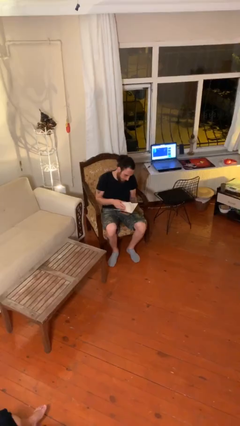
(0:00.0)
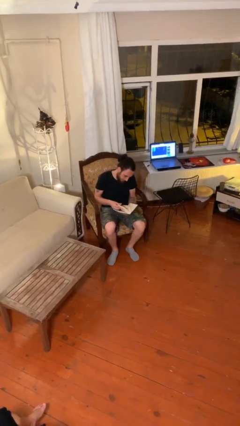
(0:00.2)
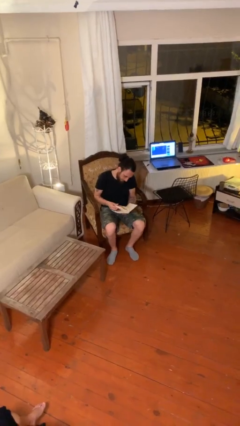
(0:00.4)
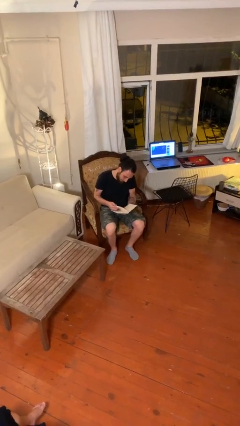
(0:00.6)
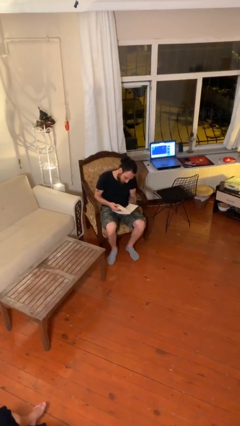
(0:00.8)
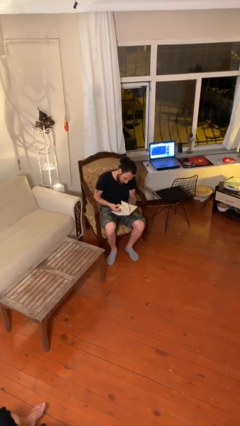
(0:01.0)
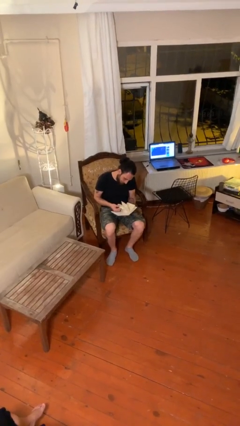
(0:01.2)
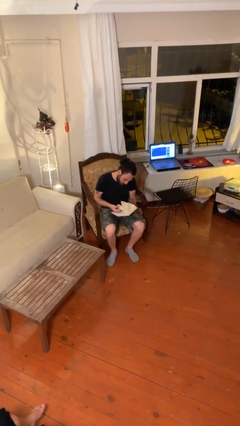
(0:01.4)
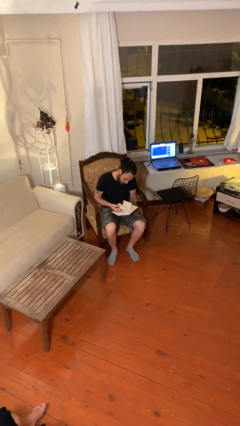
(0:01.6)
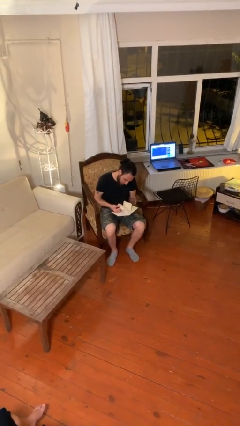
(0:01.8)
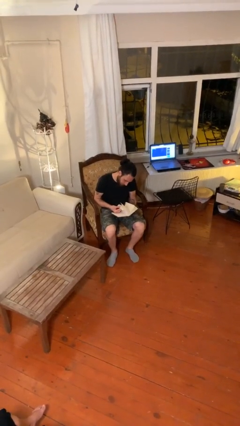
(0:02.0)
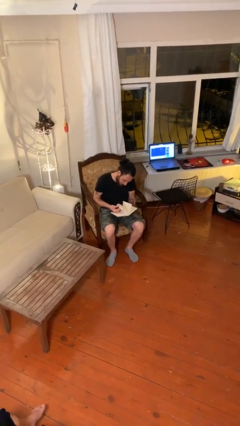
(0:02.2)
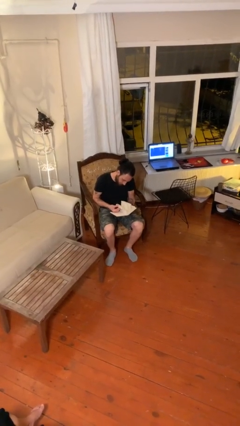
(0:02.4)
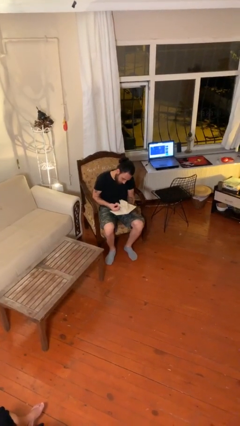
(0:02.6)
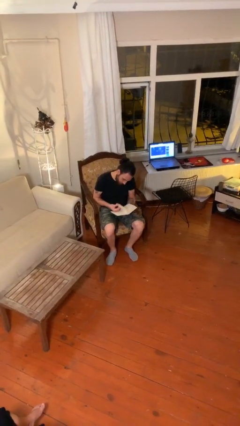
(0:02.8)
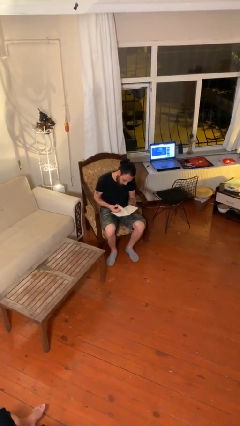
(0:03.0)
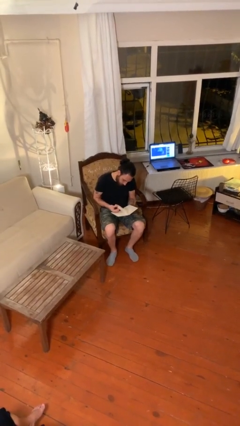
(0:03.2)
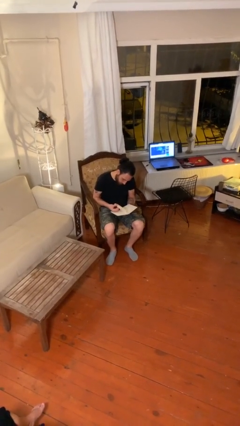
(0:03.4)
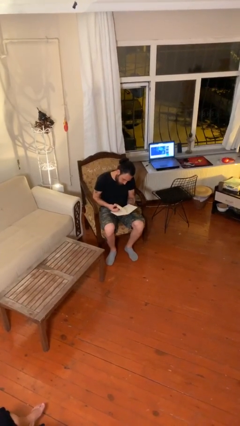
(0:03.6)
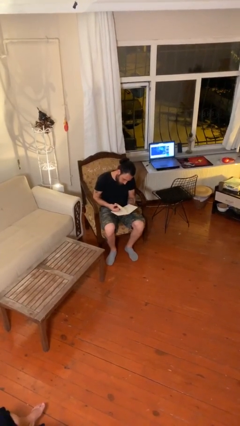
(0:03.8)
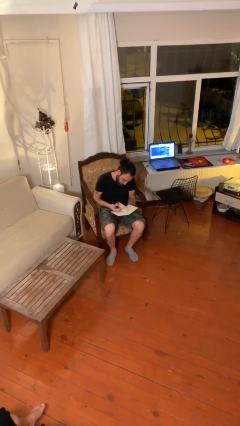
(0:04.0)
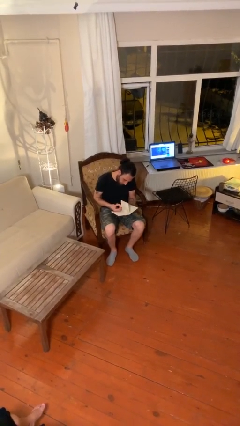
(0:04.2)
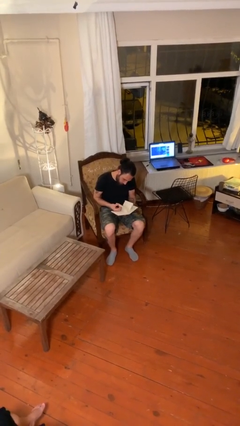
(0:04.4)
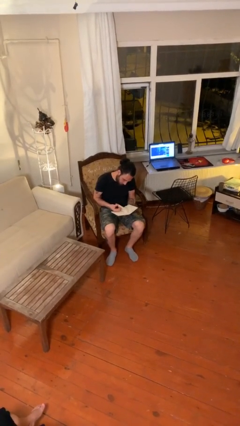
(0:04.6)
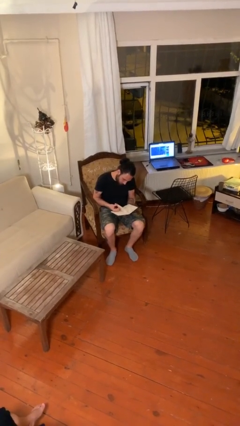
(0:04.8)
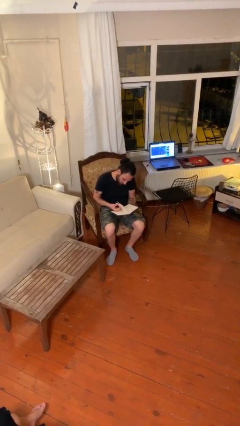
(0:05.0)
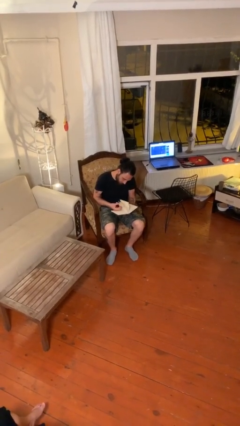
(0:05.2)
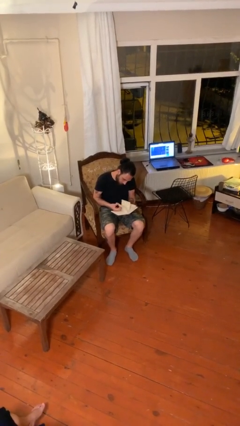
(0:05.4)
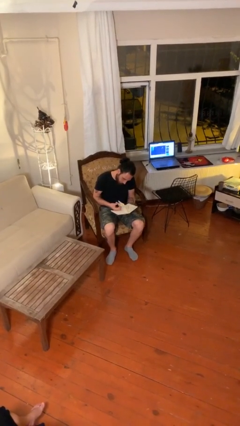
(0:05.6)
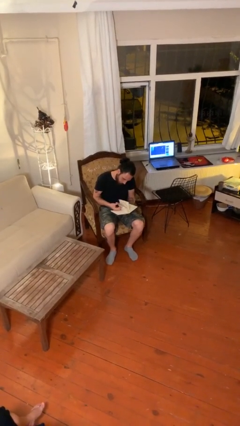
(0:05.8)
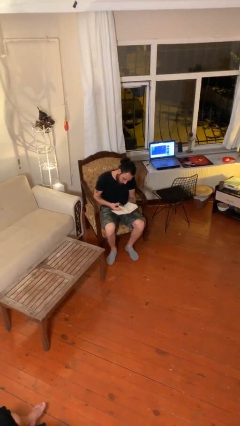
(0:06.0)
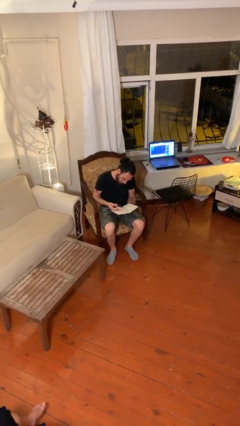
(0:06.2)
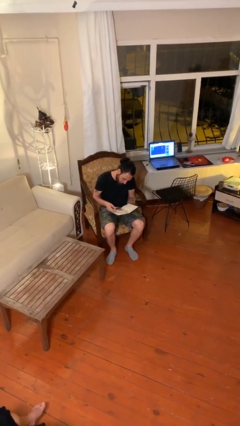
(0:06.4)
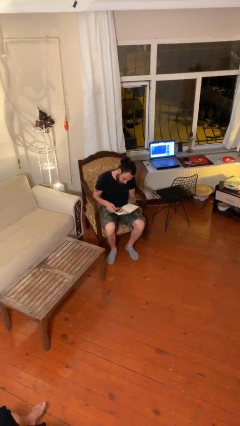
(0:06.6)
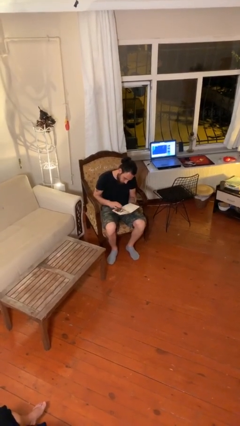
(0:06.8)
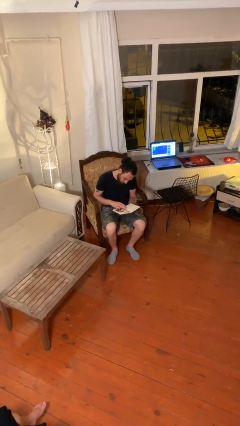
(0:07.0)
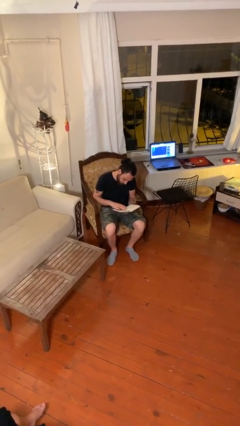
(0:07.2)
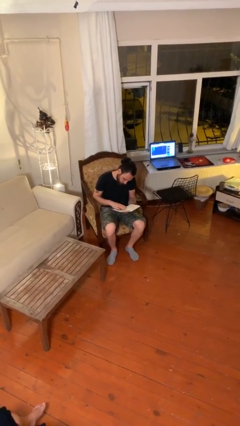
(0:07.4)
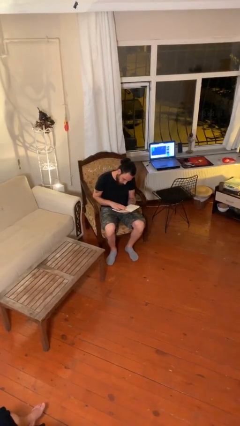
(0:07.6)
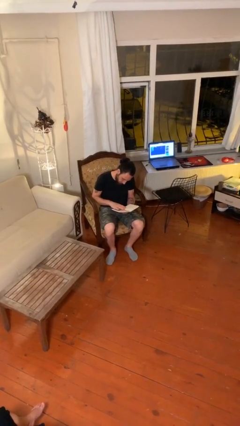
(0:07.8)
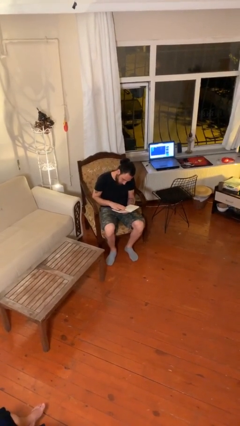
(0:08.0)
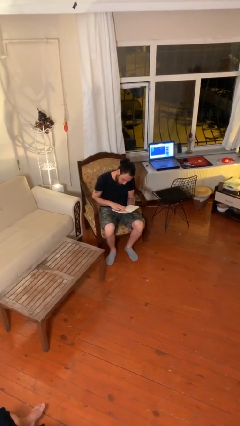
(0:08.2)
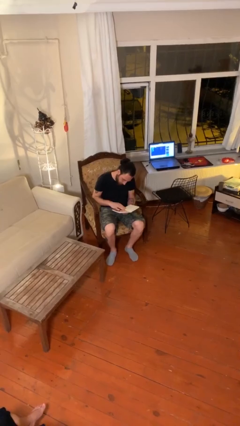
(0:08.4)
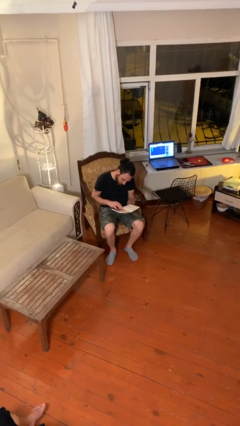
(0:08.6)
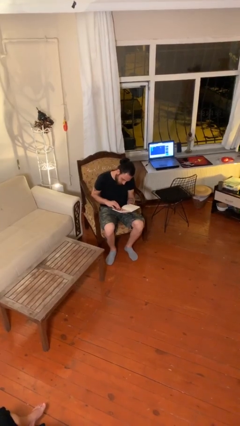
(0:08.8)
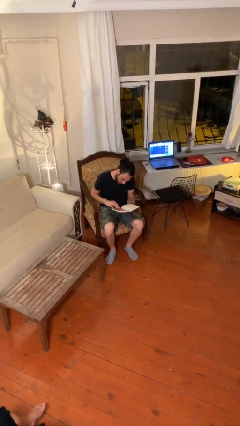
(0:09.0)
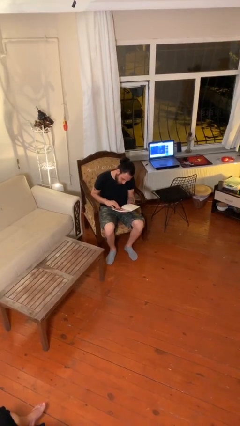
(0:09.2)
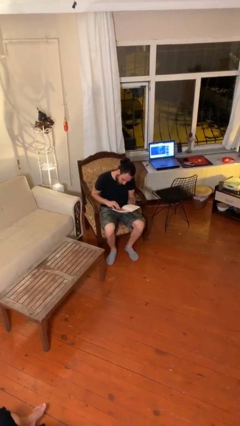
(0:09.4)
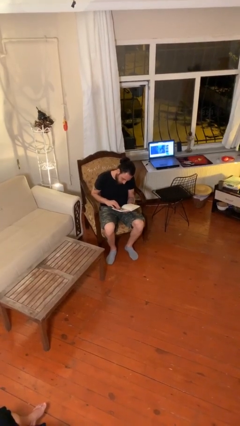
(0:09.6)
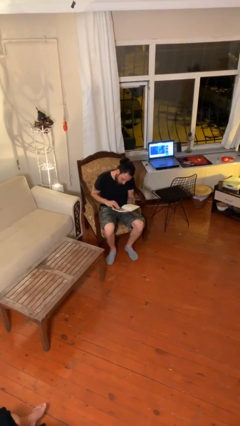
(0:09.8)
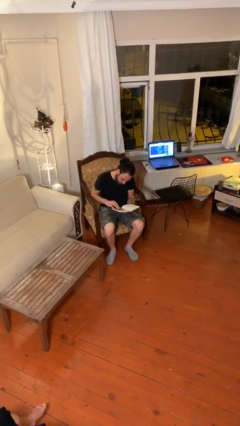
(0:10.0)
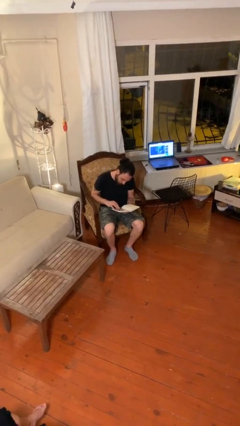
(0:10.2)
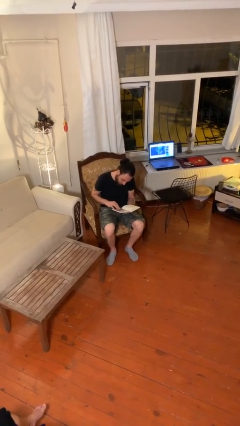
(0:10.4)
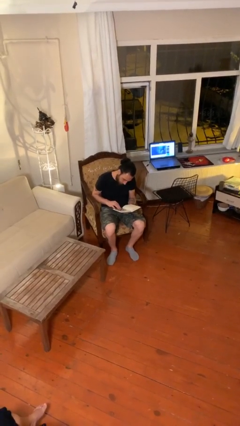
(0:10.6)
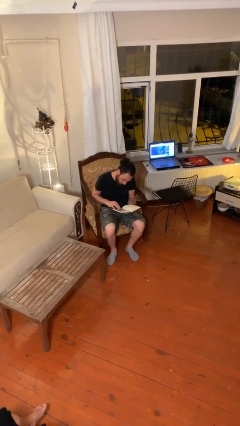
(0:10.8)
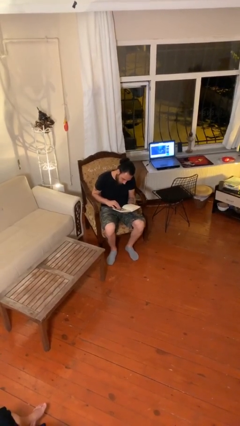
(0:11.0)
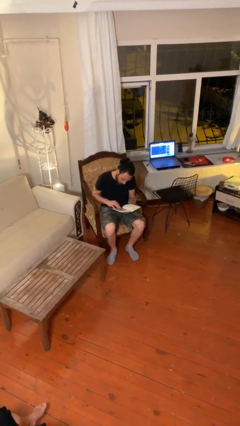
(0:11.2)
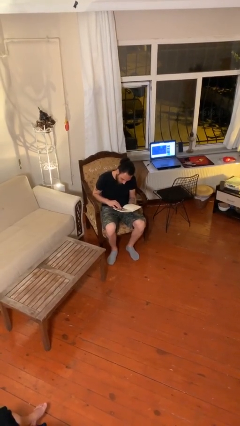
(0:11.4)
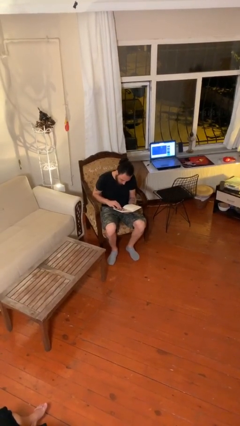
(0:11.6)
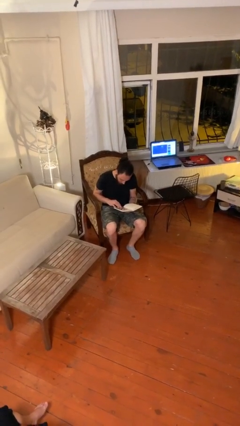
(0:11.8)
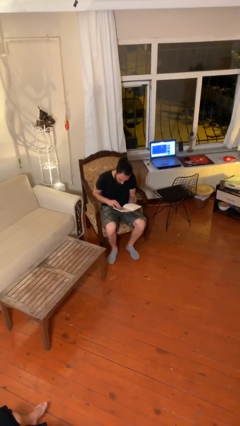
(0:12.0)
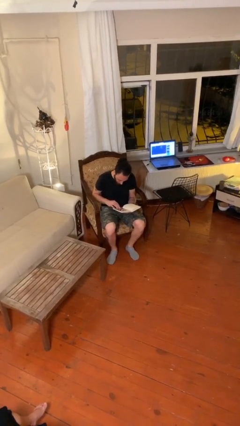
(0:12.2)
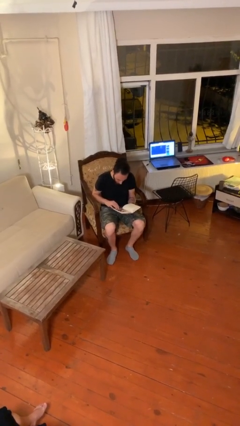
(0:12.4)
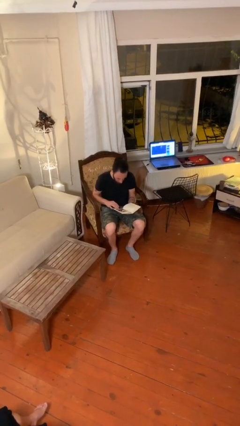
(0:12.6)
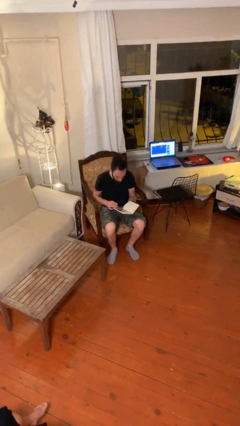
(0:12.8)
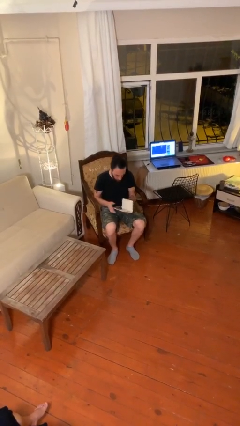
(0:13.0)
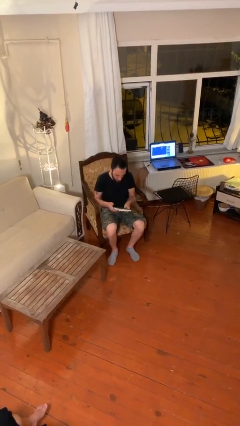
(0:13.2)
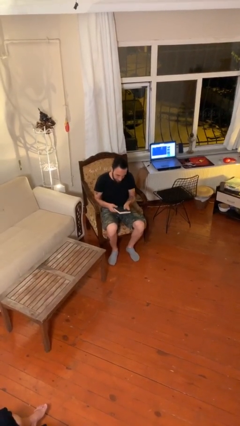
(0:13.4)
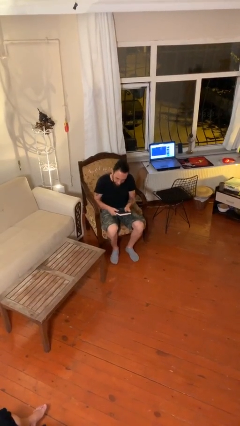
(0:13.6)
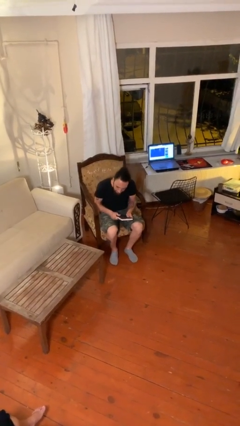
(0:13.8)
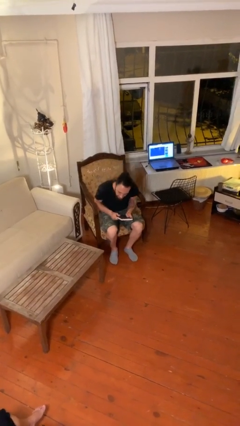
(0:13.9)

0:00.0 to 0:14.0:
person reads document

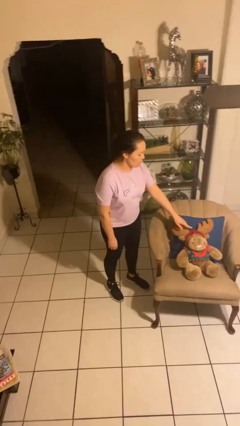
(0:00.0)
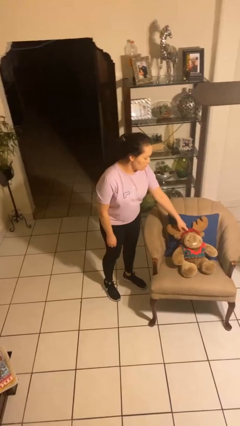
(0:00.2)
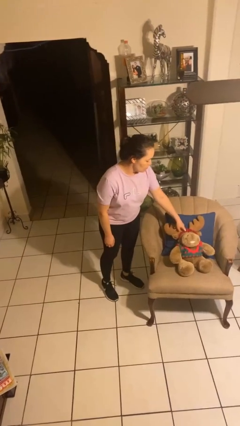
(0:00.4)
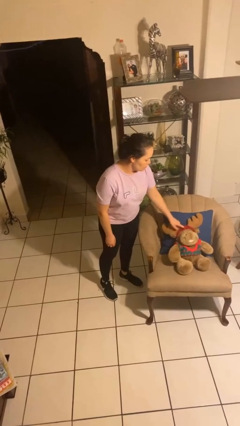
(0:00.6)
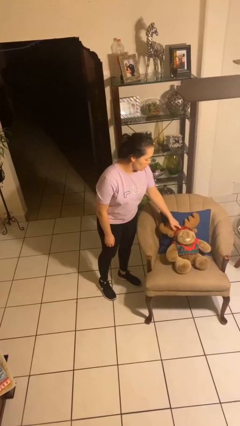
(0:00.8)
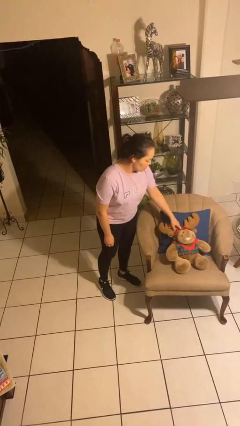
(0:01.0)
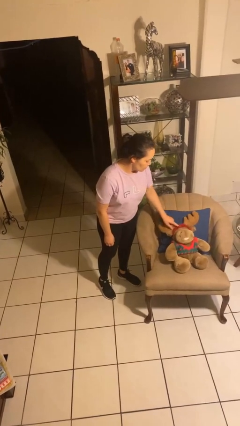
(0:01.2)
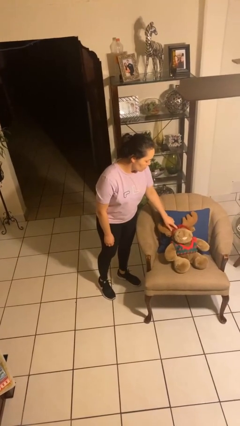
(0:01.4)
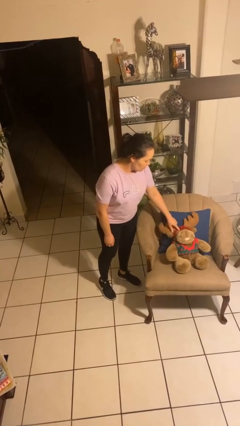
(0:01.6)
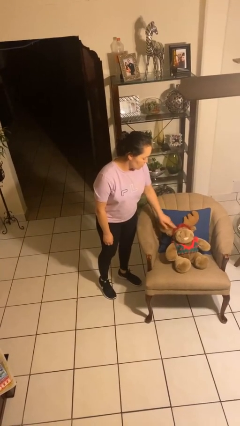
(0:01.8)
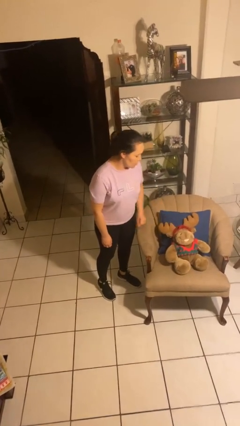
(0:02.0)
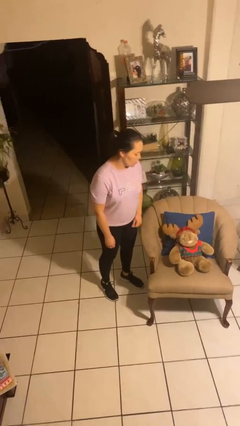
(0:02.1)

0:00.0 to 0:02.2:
person taps object with finger

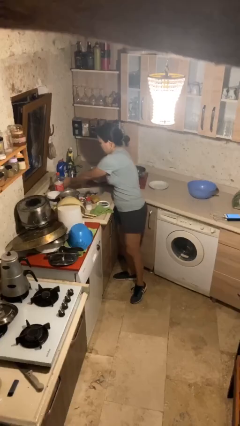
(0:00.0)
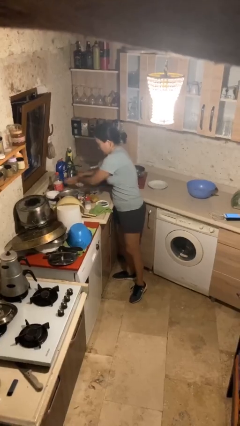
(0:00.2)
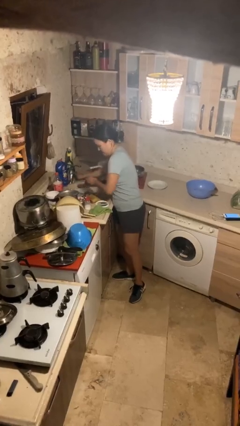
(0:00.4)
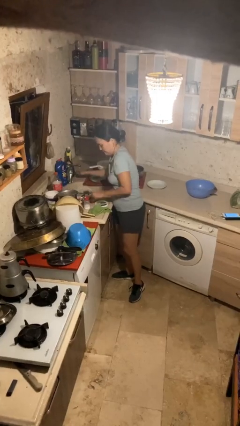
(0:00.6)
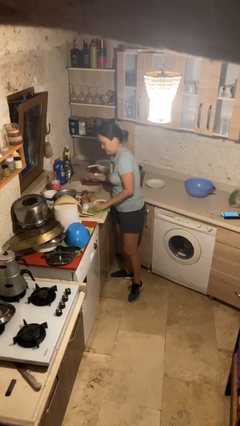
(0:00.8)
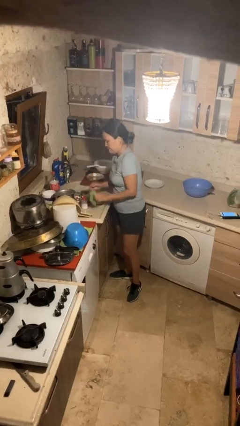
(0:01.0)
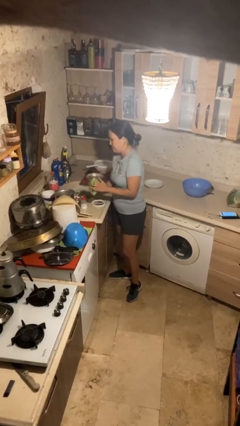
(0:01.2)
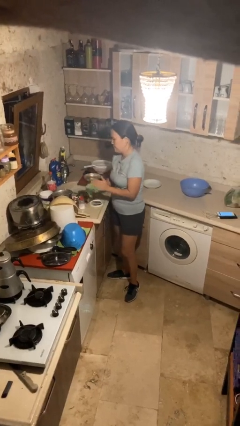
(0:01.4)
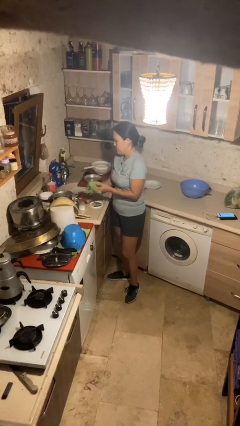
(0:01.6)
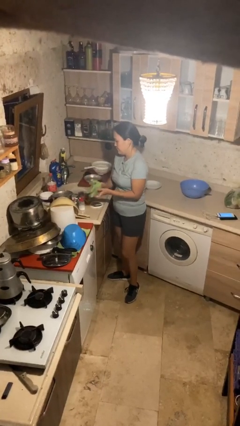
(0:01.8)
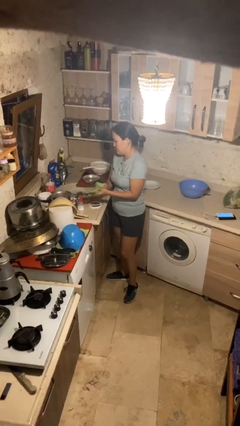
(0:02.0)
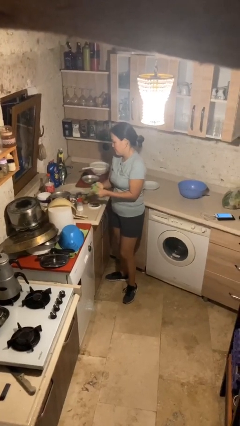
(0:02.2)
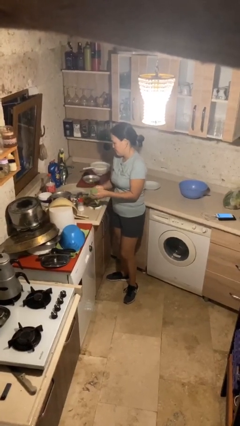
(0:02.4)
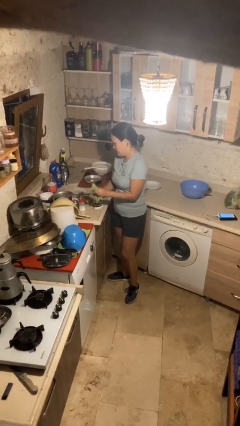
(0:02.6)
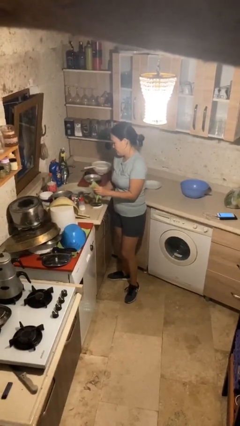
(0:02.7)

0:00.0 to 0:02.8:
person dries hands with towel
